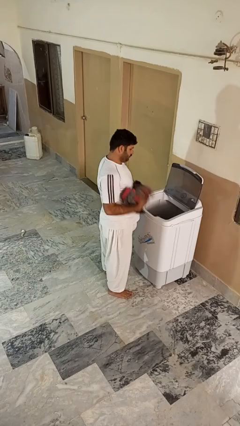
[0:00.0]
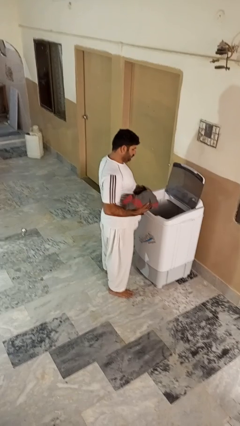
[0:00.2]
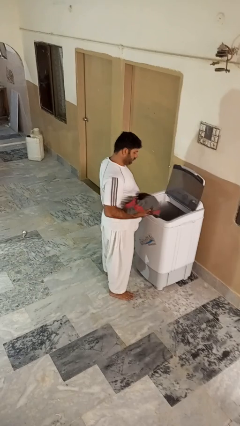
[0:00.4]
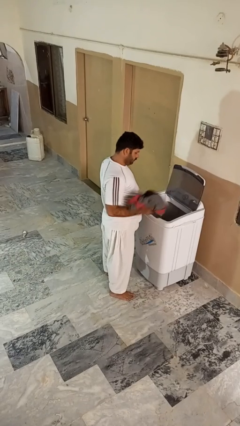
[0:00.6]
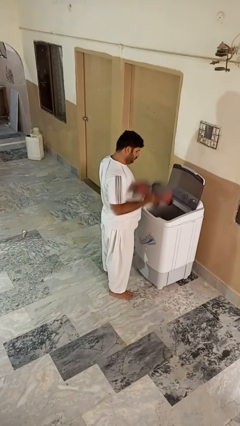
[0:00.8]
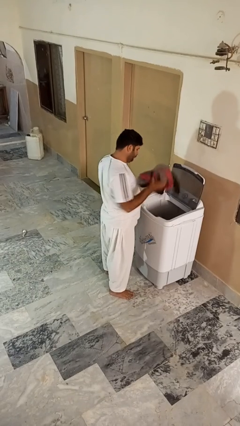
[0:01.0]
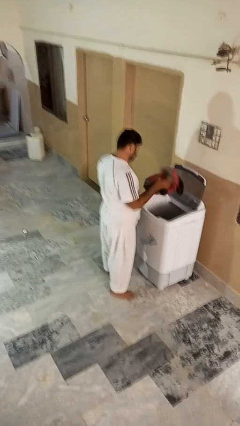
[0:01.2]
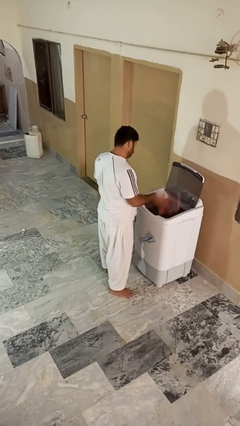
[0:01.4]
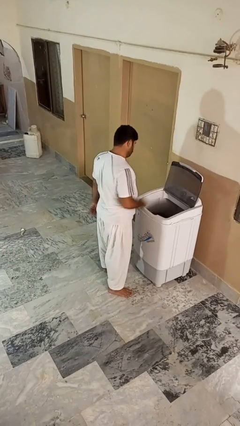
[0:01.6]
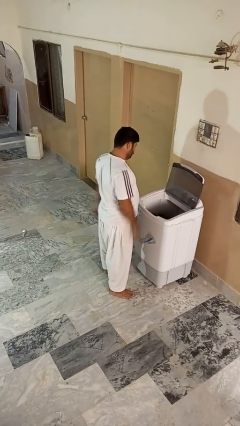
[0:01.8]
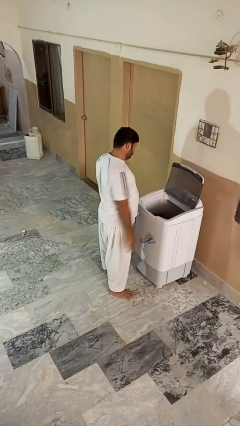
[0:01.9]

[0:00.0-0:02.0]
person loads clotheswasher

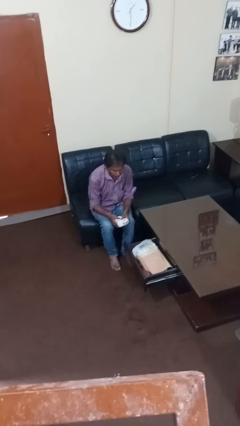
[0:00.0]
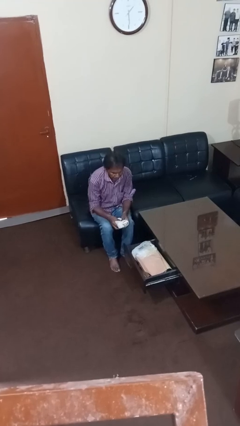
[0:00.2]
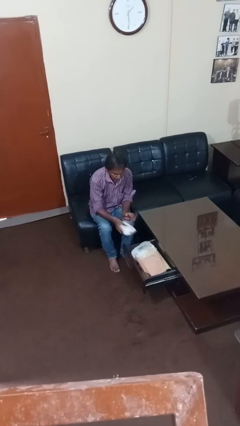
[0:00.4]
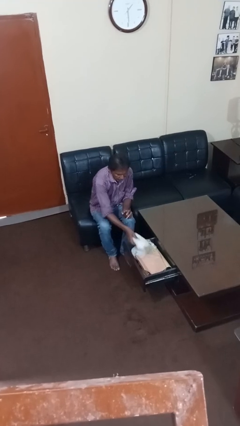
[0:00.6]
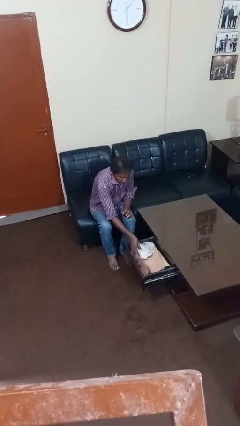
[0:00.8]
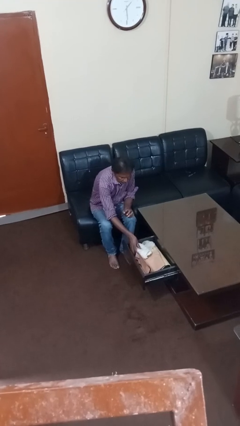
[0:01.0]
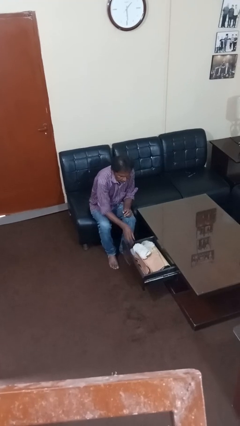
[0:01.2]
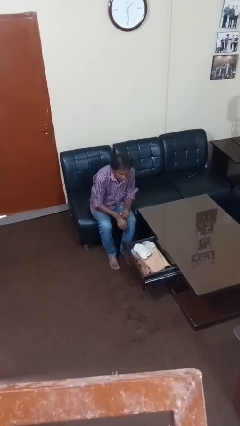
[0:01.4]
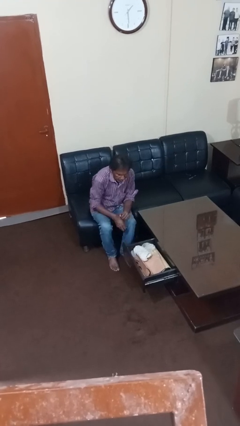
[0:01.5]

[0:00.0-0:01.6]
person puts clothes into dresser

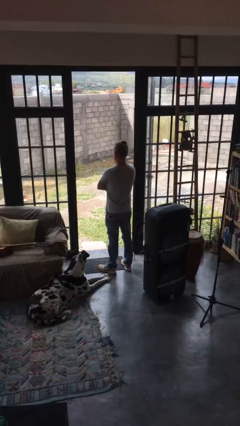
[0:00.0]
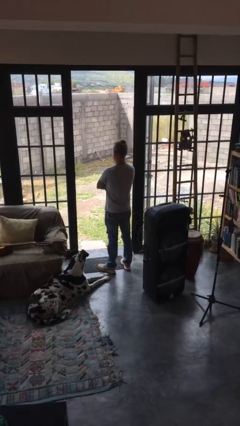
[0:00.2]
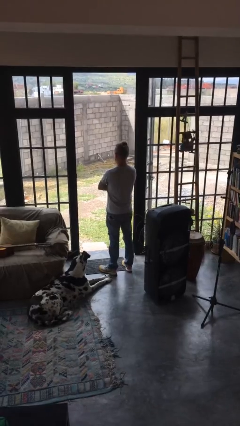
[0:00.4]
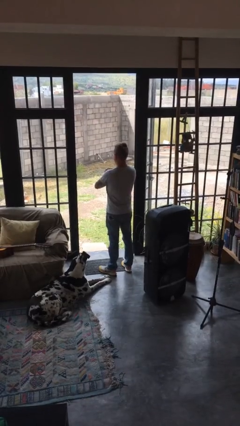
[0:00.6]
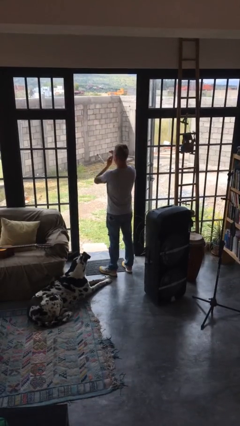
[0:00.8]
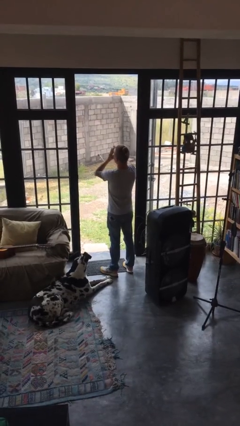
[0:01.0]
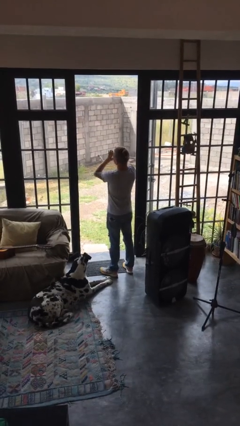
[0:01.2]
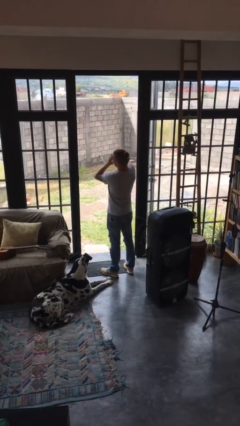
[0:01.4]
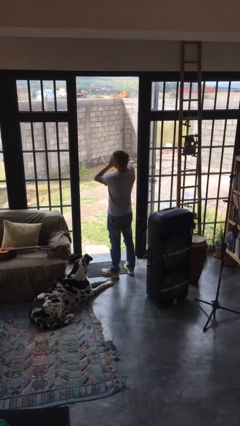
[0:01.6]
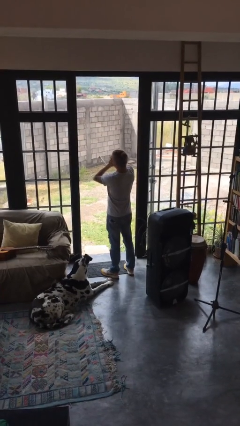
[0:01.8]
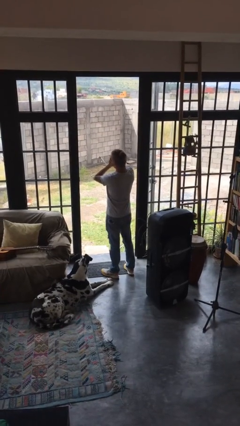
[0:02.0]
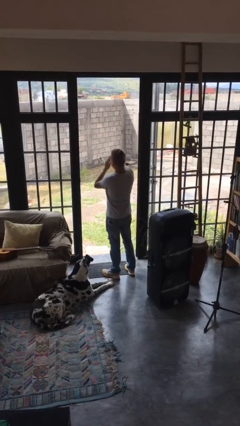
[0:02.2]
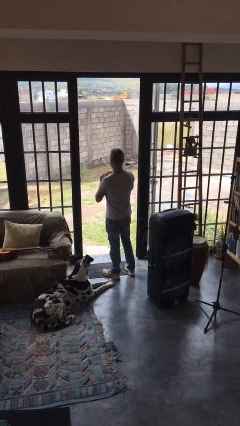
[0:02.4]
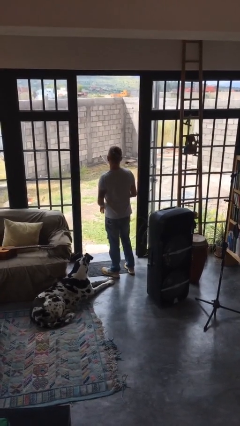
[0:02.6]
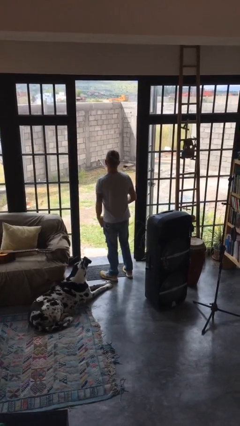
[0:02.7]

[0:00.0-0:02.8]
person shades eyes

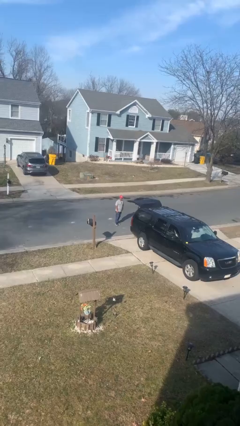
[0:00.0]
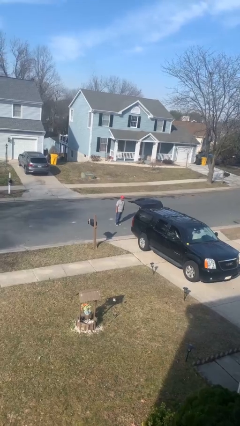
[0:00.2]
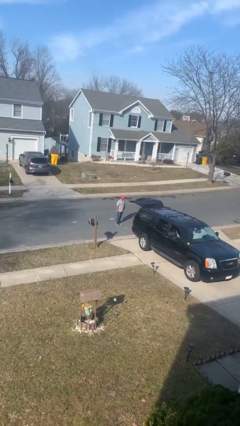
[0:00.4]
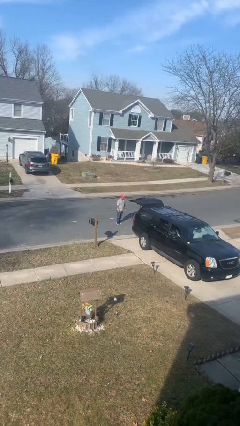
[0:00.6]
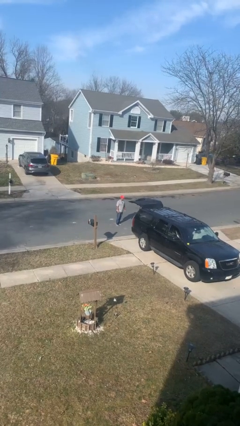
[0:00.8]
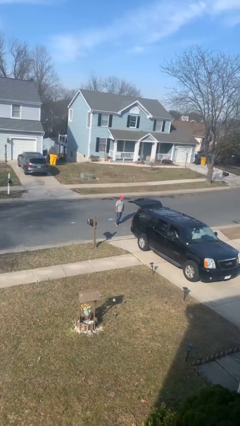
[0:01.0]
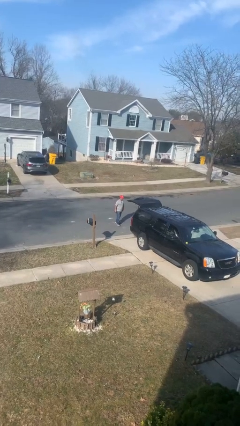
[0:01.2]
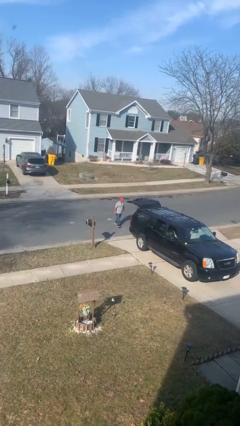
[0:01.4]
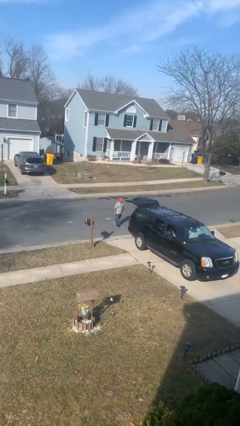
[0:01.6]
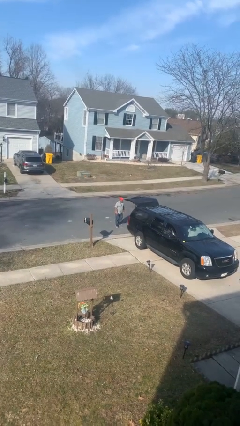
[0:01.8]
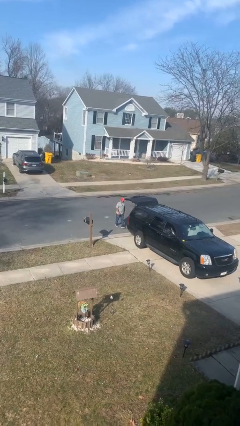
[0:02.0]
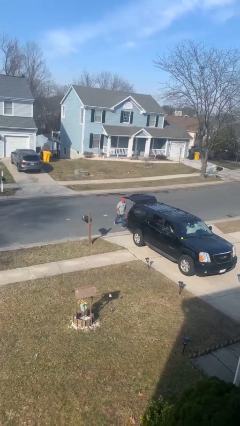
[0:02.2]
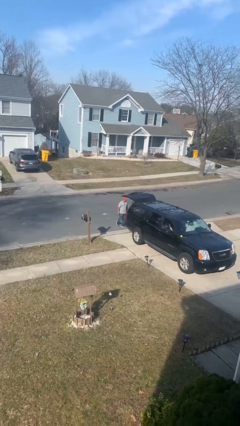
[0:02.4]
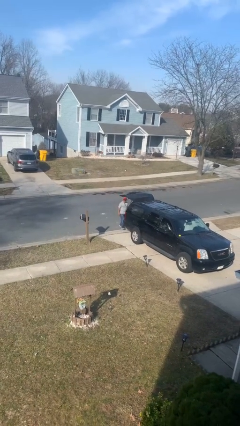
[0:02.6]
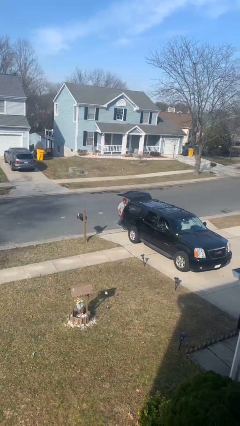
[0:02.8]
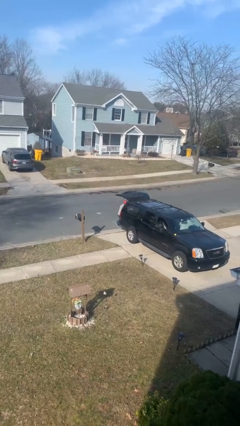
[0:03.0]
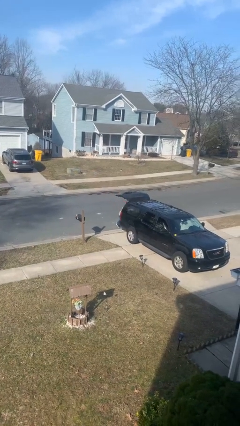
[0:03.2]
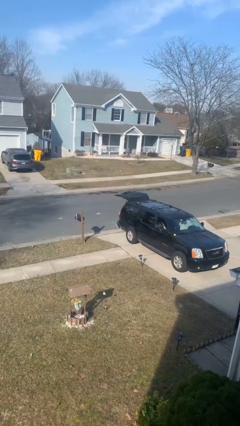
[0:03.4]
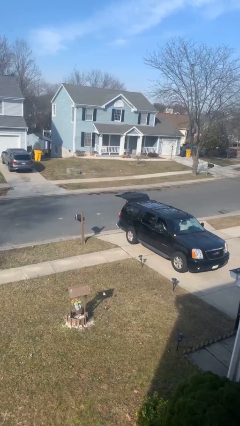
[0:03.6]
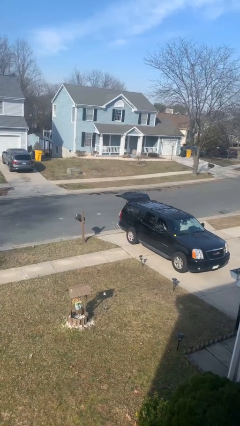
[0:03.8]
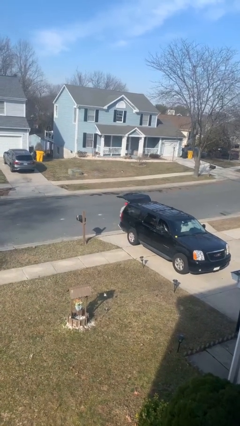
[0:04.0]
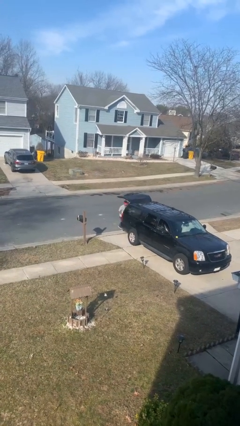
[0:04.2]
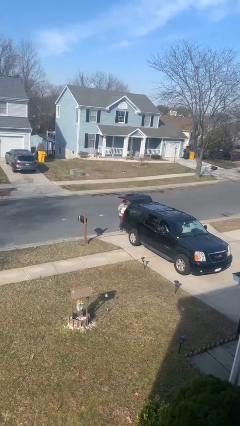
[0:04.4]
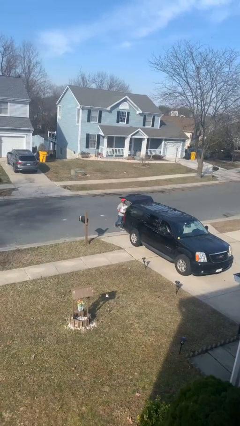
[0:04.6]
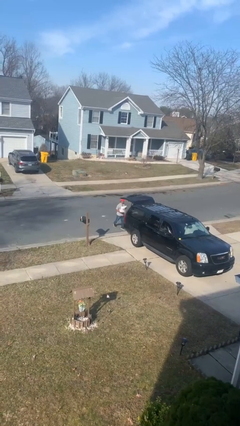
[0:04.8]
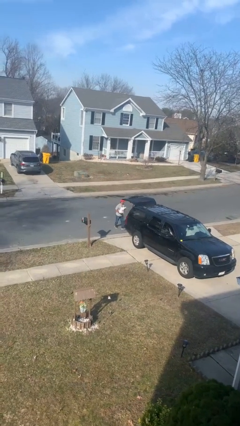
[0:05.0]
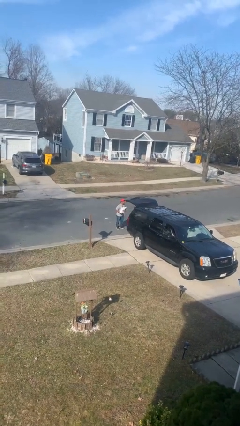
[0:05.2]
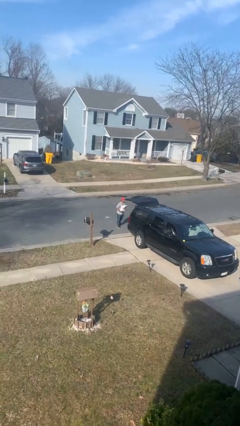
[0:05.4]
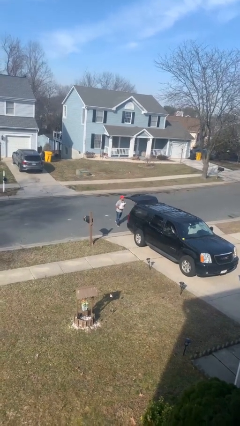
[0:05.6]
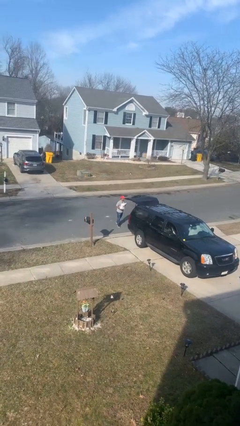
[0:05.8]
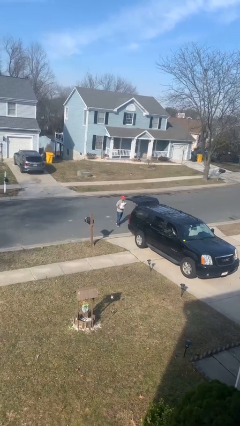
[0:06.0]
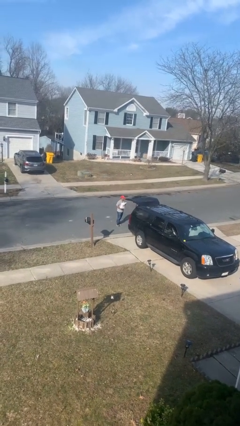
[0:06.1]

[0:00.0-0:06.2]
person unloads car

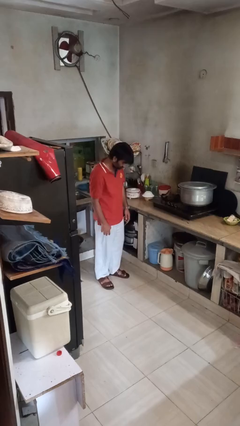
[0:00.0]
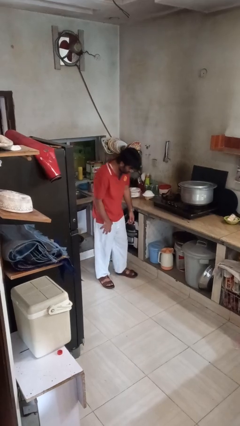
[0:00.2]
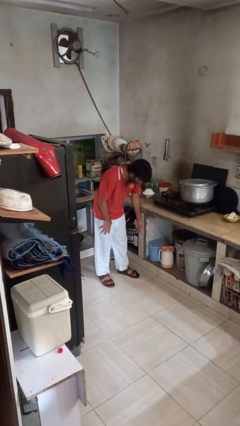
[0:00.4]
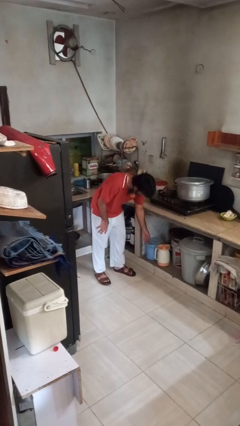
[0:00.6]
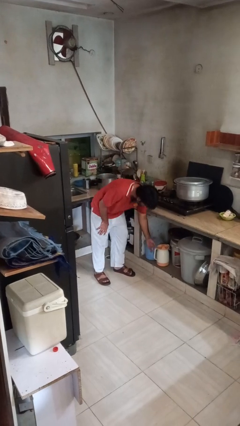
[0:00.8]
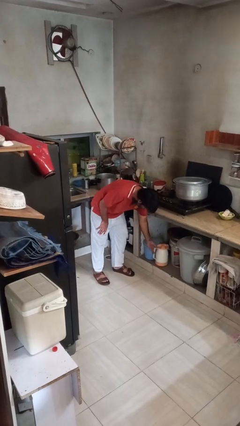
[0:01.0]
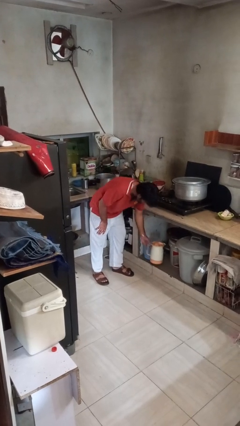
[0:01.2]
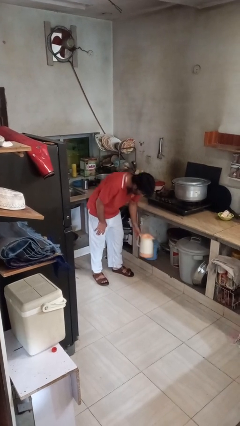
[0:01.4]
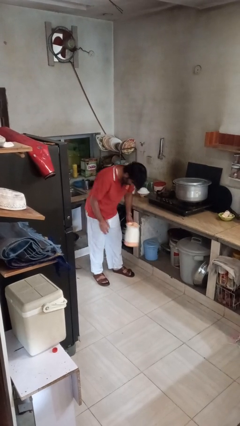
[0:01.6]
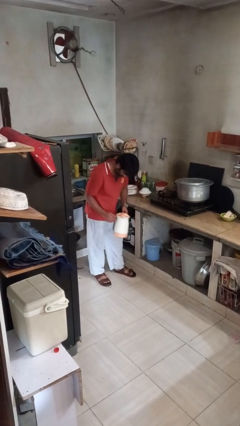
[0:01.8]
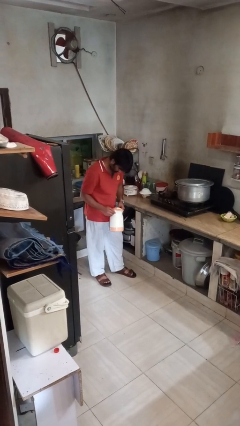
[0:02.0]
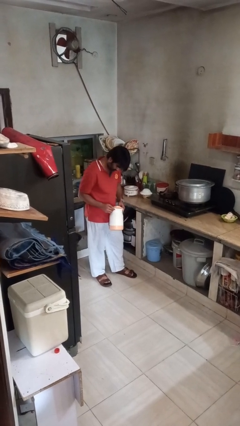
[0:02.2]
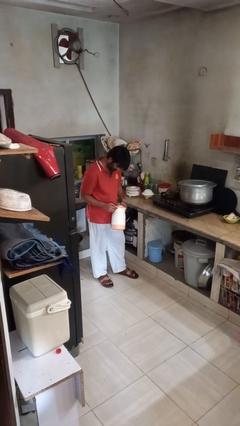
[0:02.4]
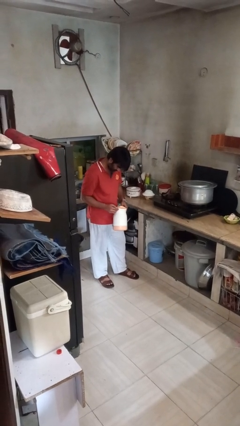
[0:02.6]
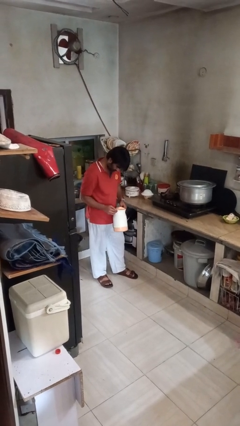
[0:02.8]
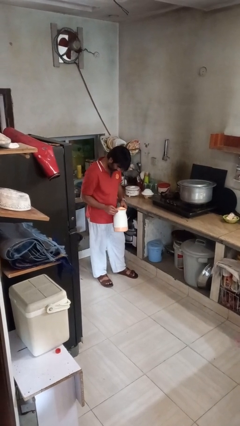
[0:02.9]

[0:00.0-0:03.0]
person picks up object from cabinet

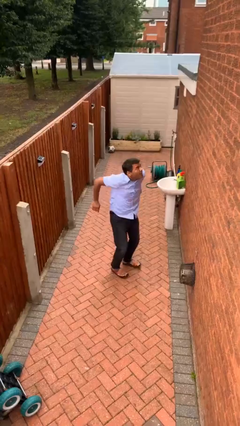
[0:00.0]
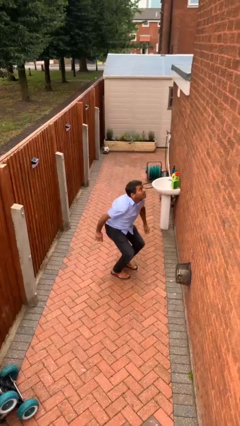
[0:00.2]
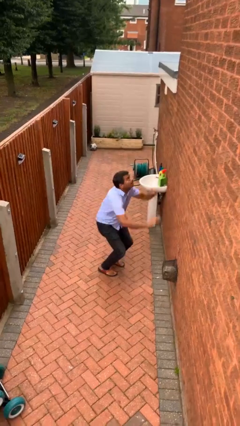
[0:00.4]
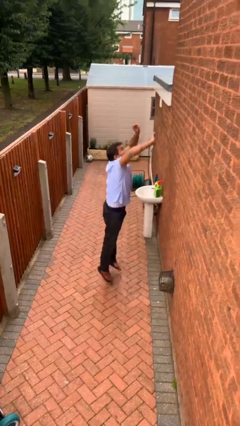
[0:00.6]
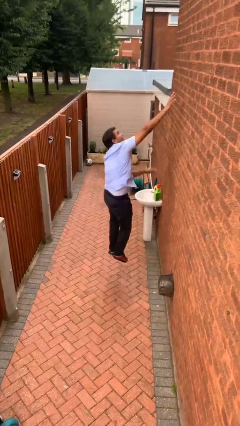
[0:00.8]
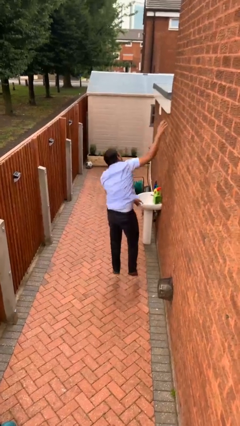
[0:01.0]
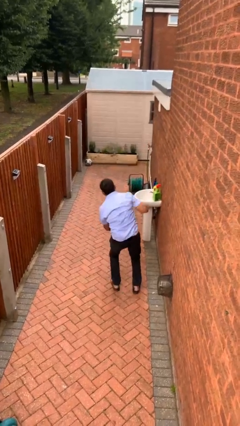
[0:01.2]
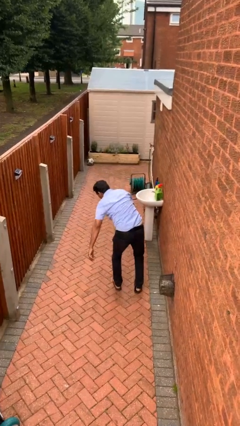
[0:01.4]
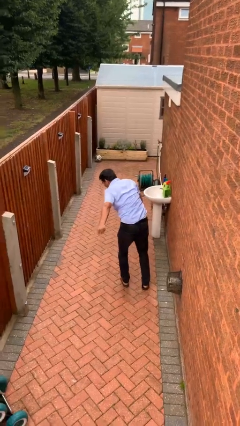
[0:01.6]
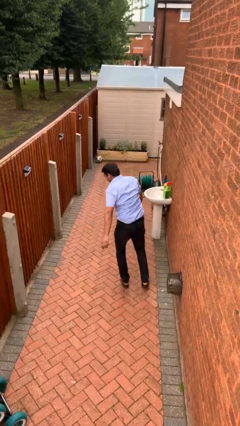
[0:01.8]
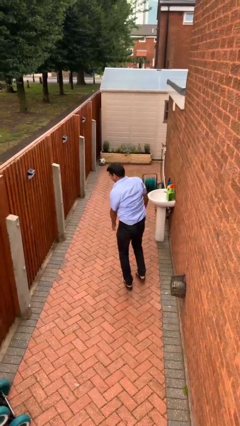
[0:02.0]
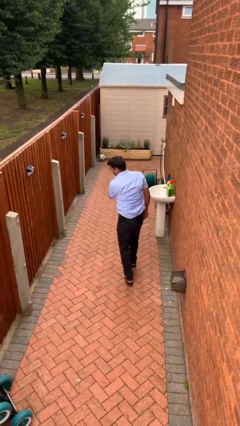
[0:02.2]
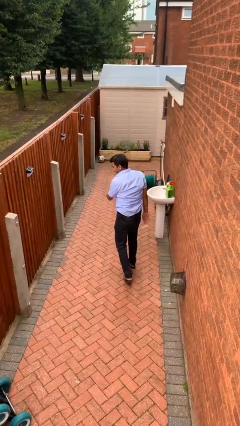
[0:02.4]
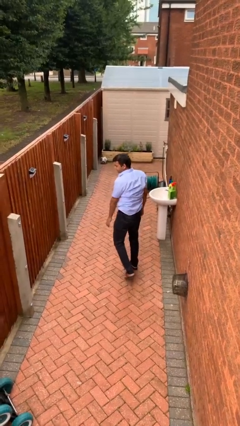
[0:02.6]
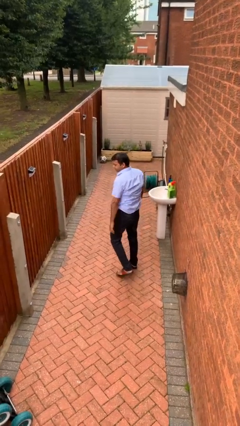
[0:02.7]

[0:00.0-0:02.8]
person jumps
